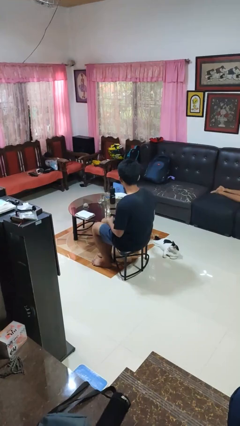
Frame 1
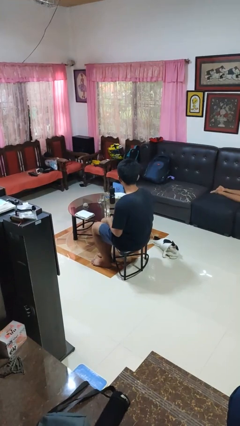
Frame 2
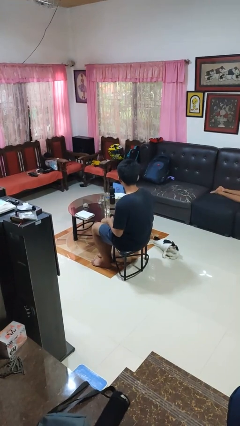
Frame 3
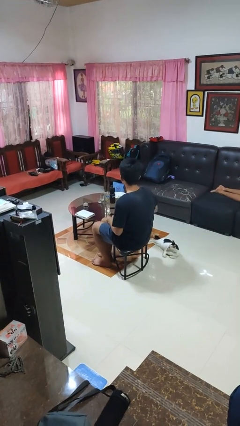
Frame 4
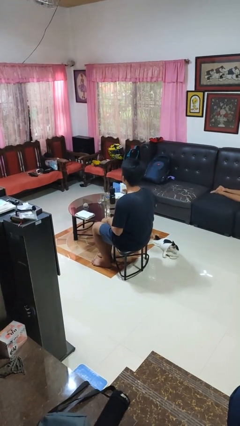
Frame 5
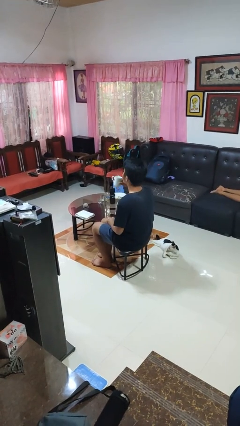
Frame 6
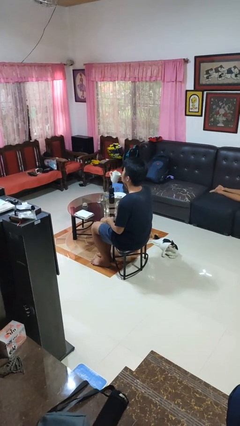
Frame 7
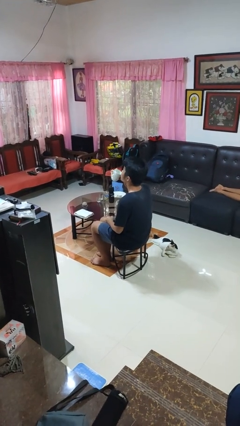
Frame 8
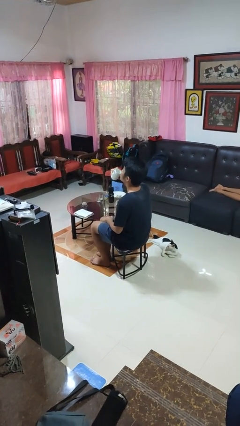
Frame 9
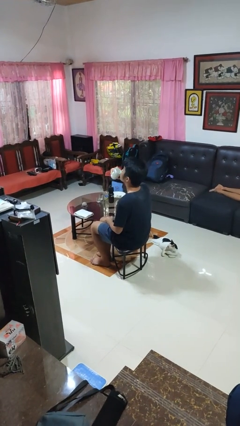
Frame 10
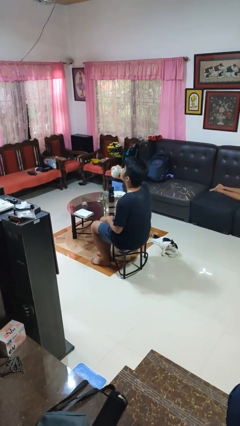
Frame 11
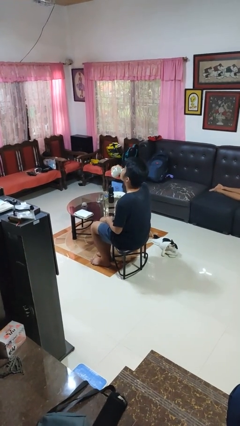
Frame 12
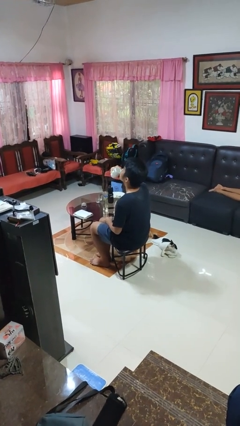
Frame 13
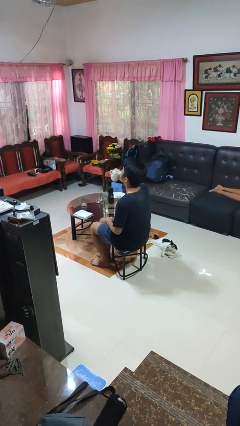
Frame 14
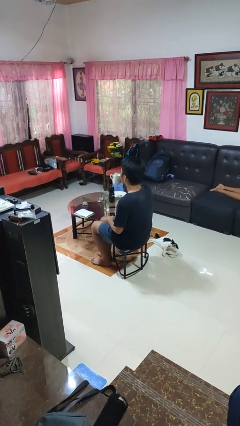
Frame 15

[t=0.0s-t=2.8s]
person drinks from cup

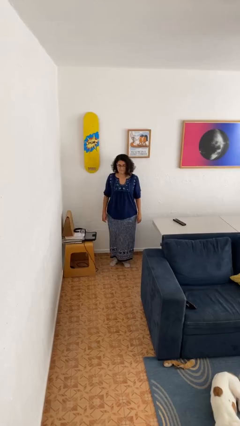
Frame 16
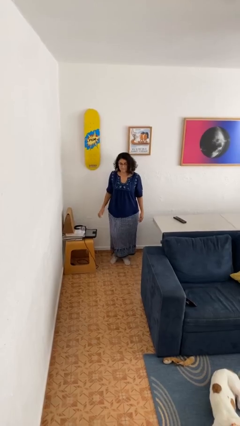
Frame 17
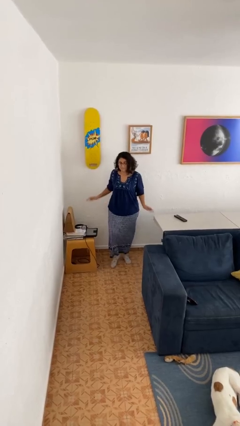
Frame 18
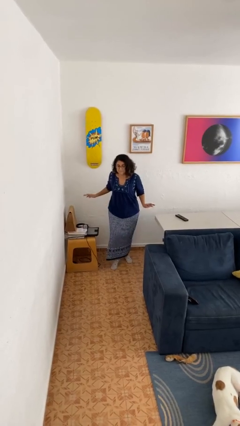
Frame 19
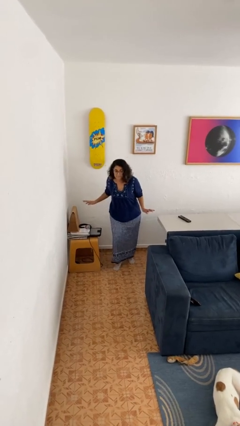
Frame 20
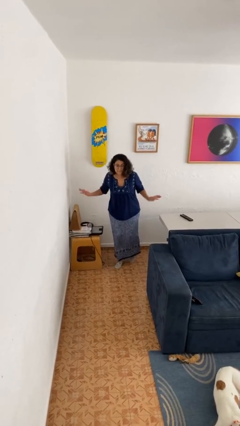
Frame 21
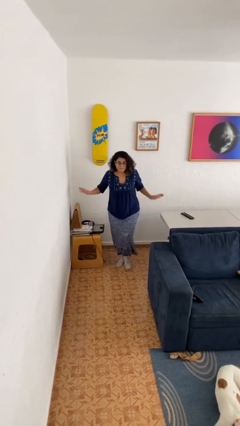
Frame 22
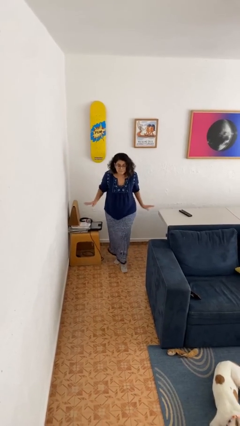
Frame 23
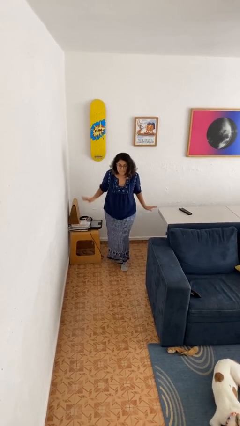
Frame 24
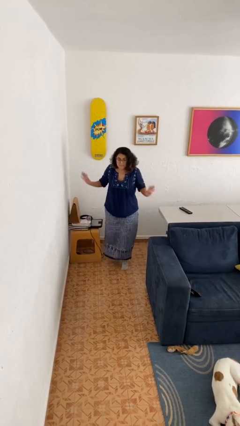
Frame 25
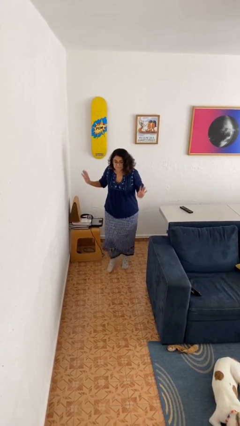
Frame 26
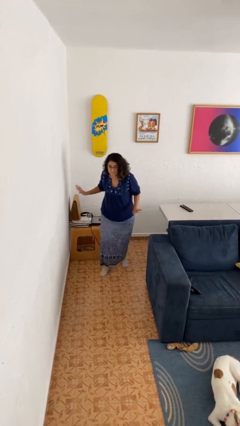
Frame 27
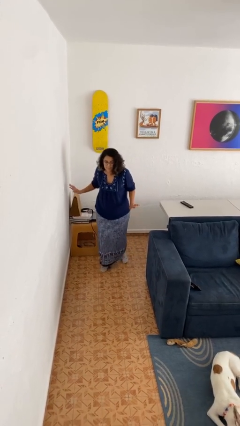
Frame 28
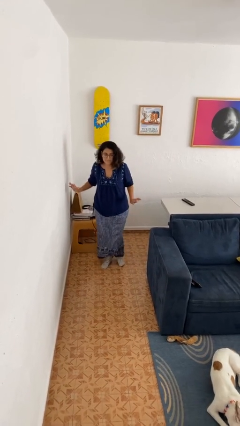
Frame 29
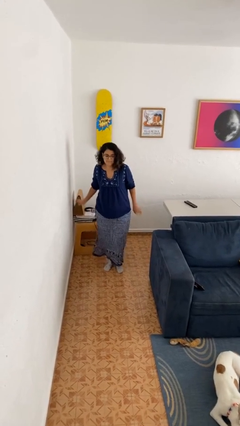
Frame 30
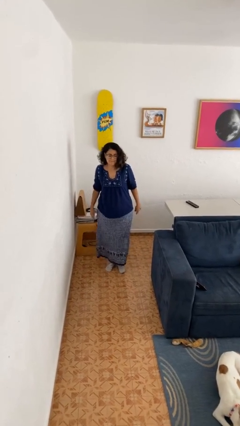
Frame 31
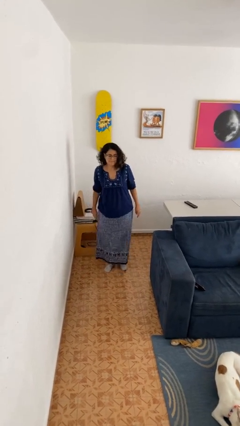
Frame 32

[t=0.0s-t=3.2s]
person walks tiptoe

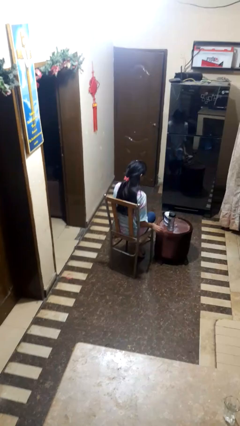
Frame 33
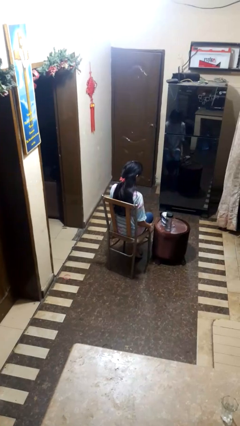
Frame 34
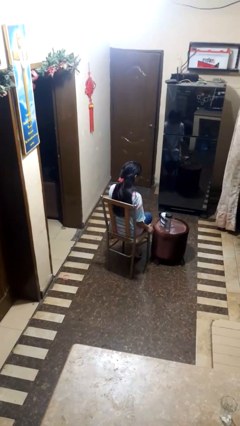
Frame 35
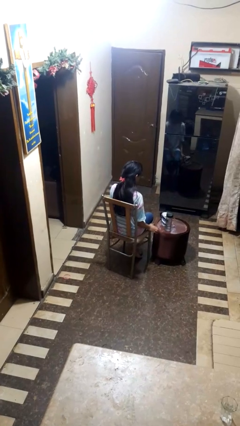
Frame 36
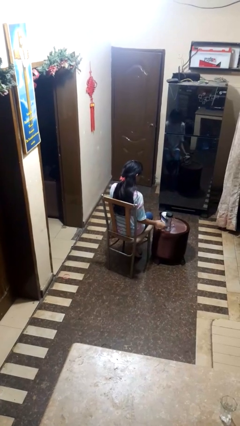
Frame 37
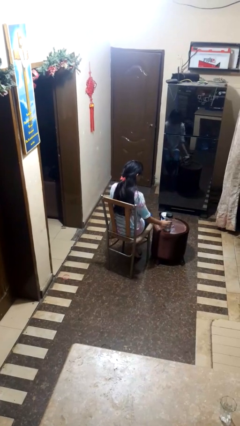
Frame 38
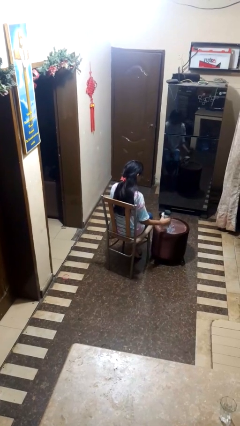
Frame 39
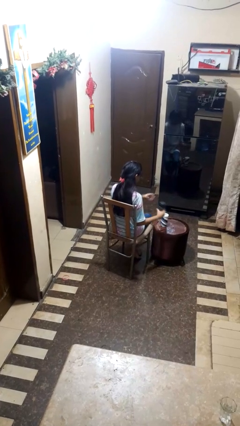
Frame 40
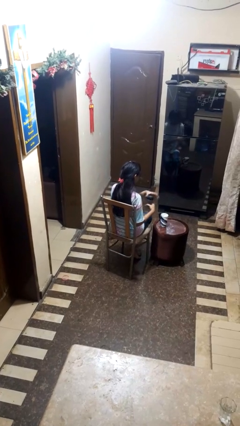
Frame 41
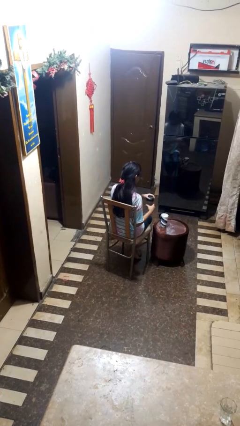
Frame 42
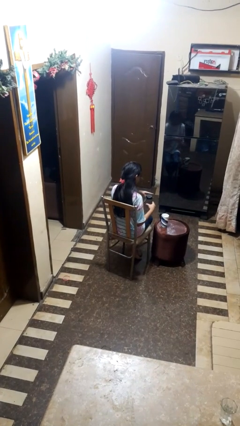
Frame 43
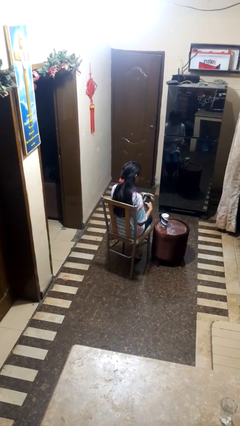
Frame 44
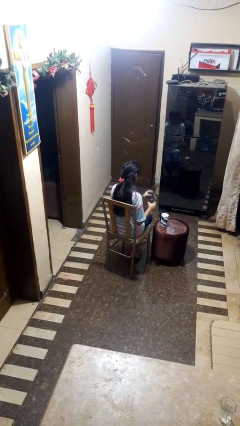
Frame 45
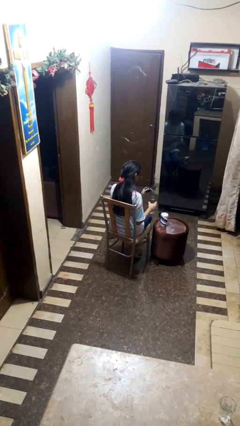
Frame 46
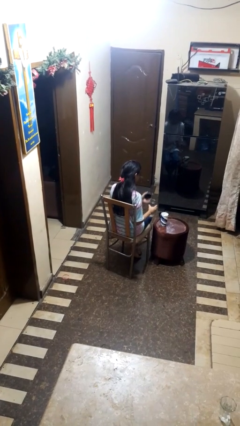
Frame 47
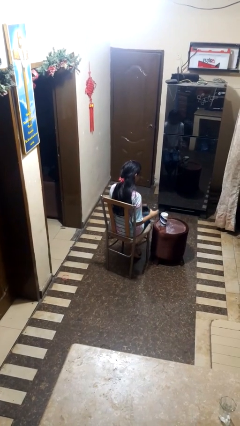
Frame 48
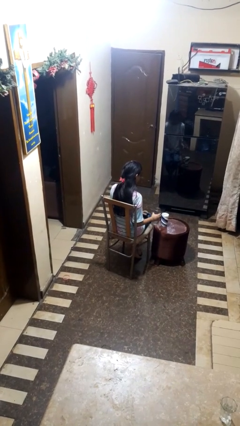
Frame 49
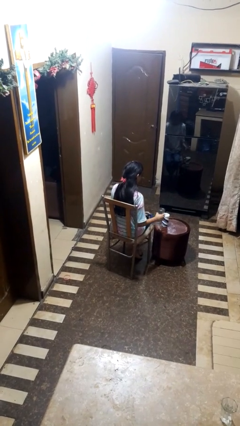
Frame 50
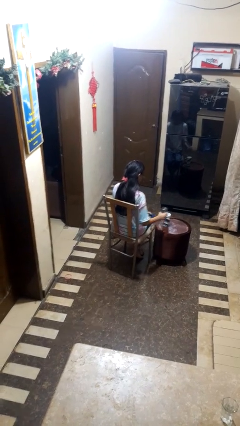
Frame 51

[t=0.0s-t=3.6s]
person unscrews lid from bottle

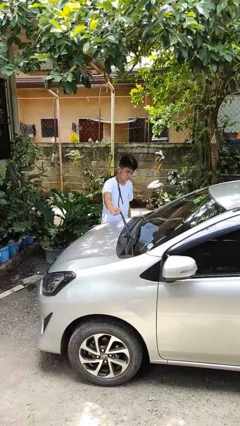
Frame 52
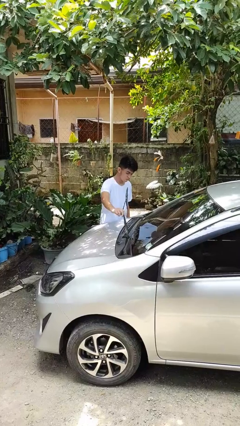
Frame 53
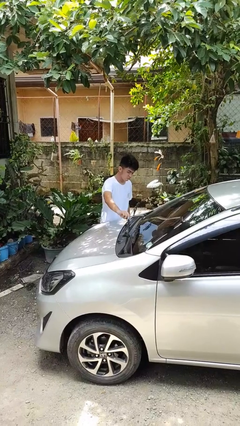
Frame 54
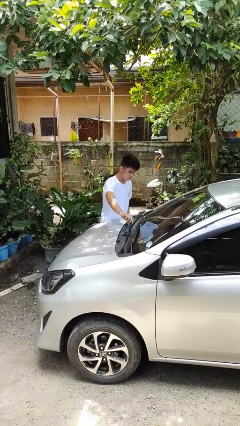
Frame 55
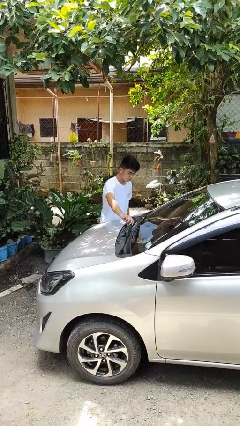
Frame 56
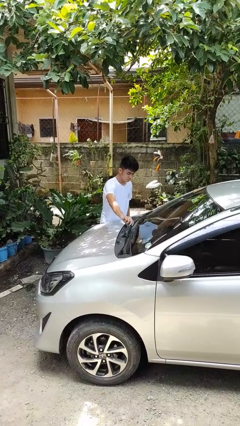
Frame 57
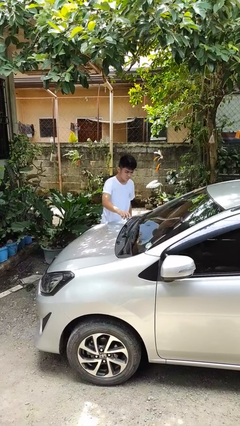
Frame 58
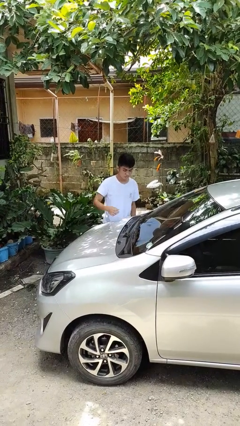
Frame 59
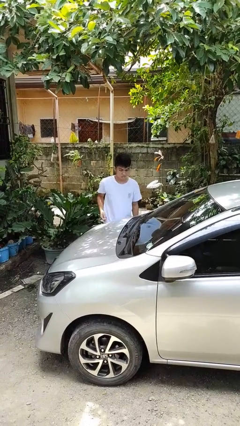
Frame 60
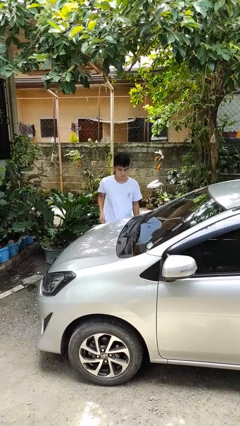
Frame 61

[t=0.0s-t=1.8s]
person flips down car wipers

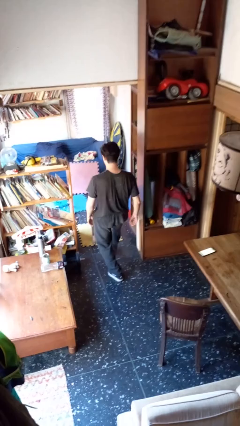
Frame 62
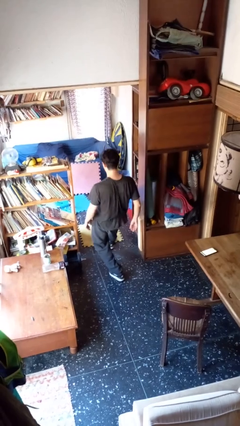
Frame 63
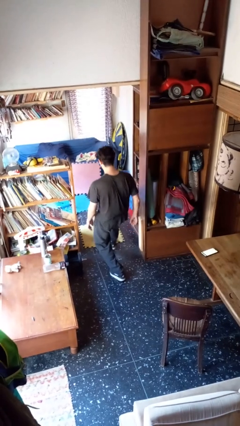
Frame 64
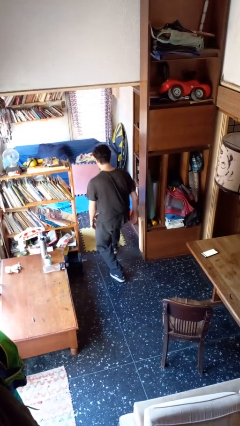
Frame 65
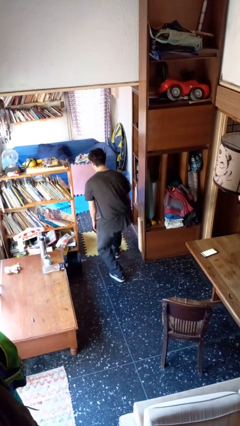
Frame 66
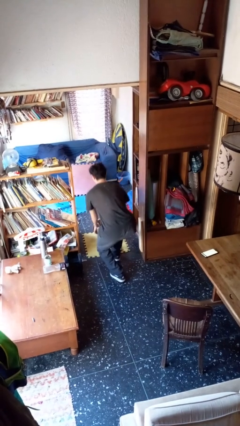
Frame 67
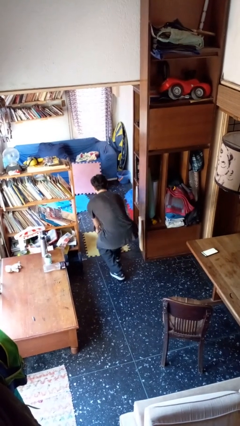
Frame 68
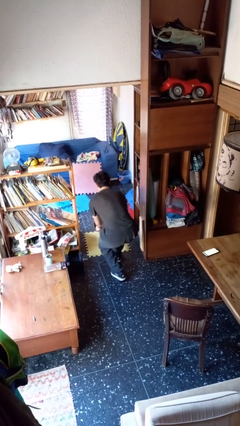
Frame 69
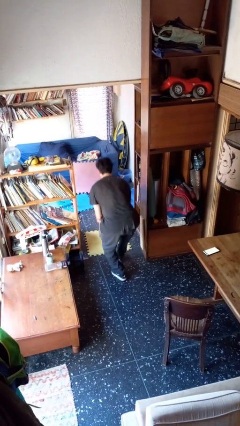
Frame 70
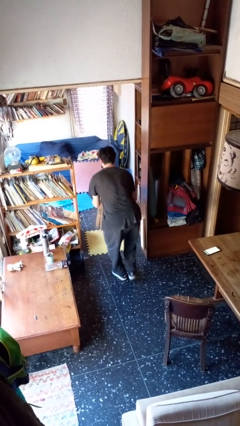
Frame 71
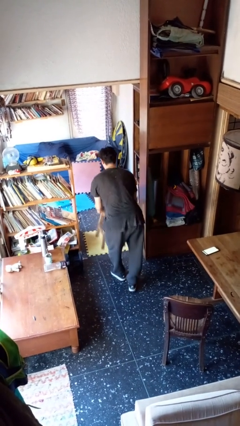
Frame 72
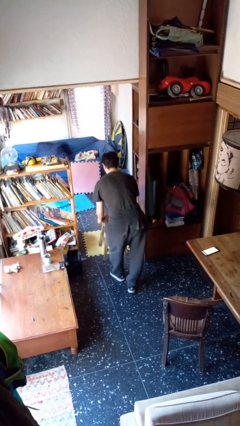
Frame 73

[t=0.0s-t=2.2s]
person sets upright furniture

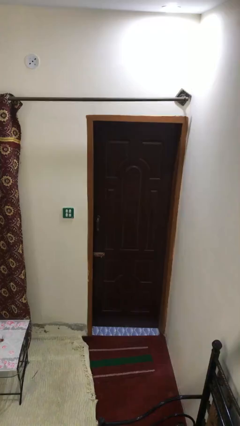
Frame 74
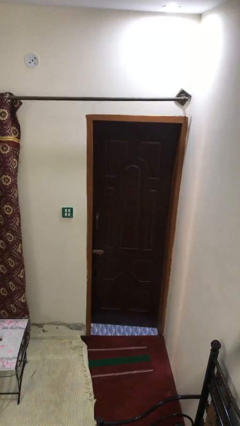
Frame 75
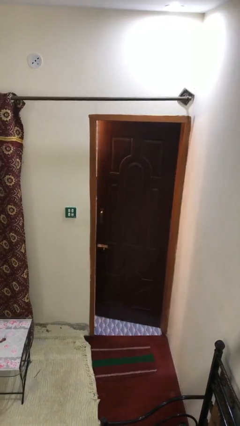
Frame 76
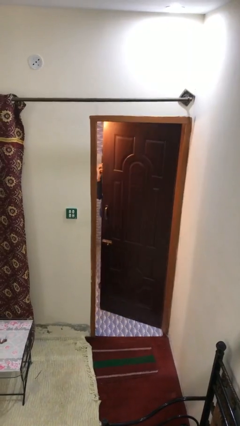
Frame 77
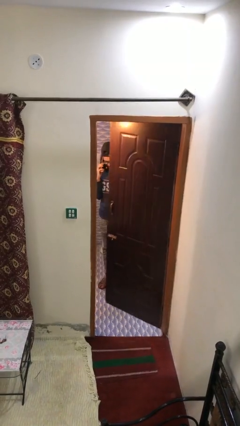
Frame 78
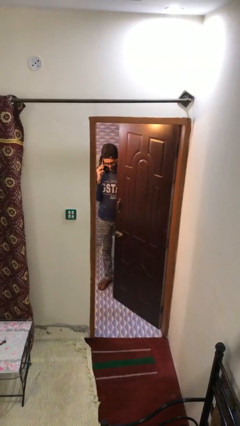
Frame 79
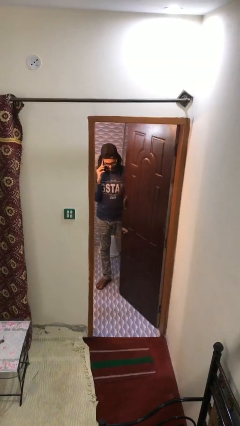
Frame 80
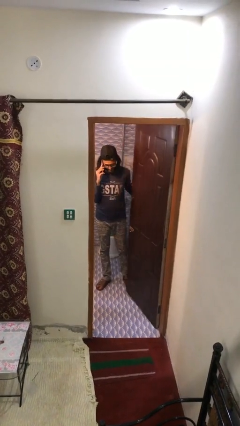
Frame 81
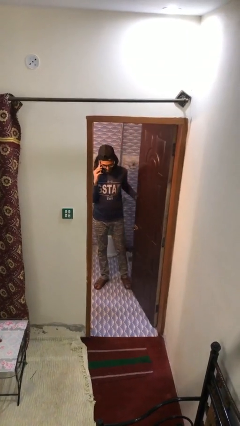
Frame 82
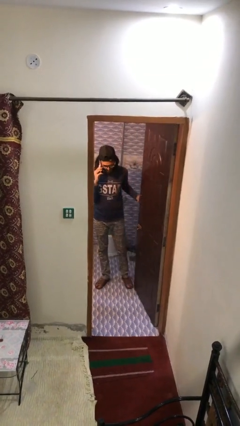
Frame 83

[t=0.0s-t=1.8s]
person opens facility door

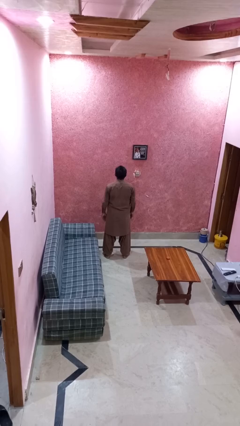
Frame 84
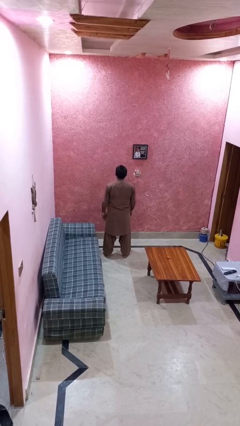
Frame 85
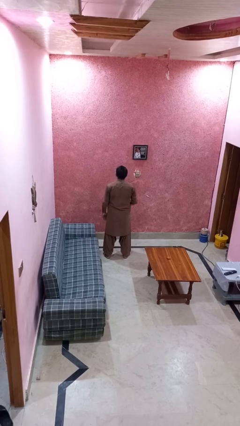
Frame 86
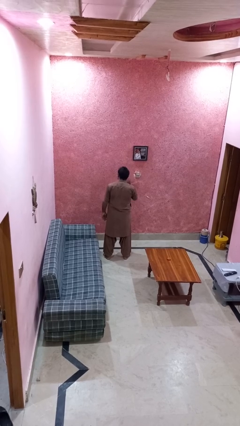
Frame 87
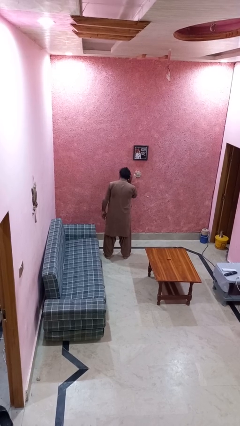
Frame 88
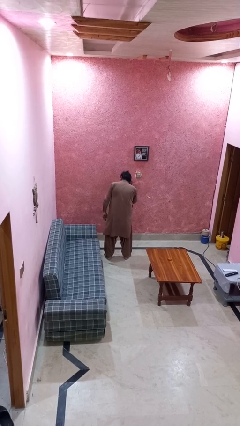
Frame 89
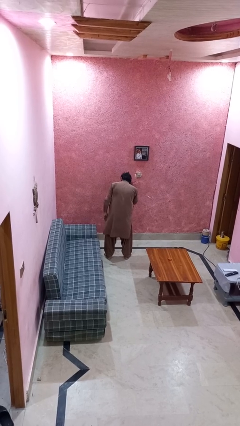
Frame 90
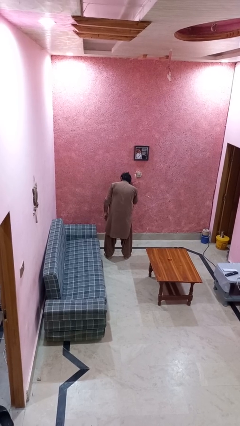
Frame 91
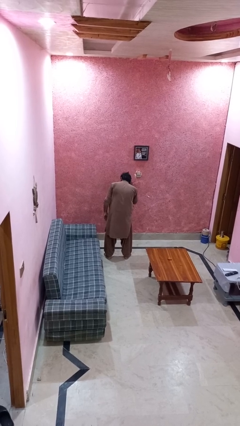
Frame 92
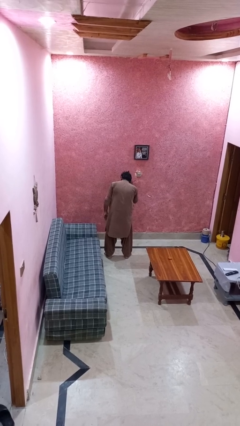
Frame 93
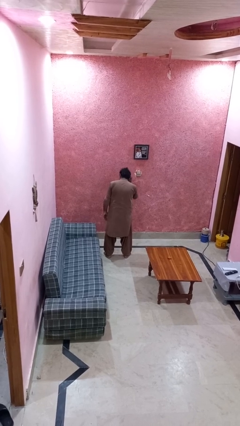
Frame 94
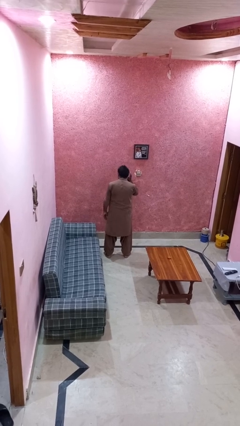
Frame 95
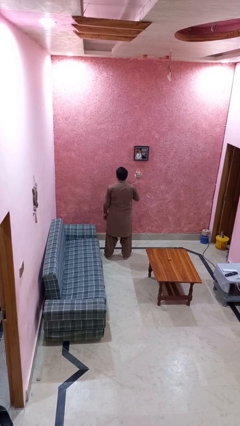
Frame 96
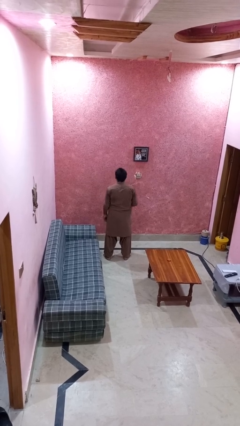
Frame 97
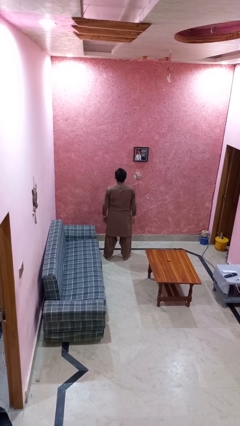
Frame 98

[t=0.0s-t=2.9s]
person gestures listen closely
